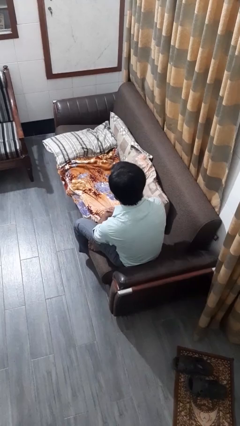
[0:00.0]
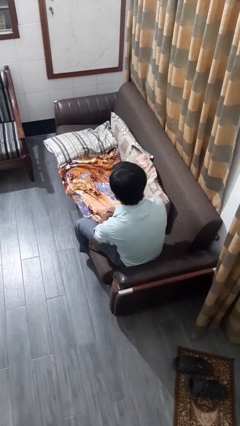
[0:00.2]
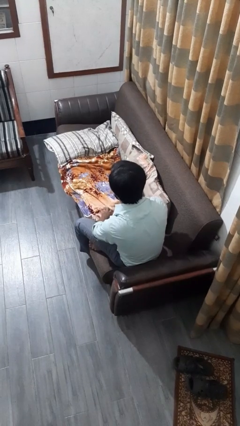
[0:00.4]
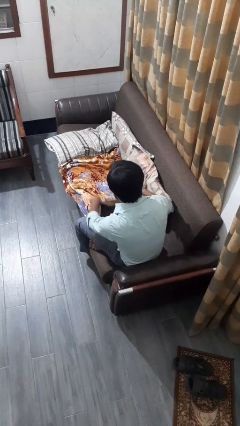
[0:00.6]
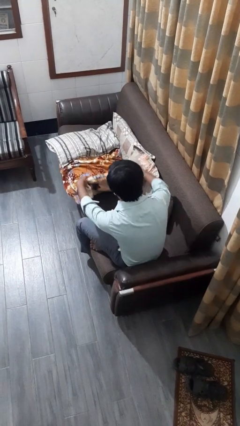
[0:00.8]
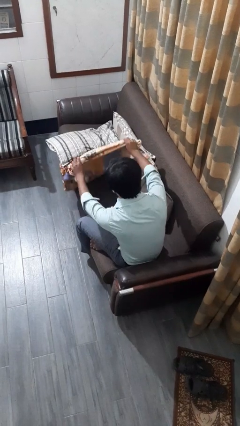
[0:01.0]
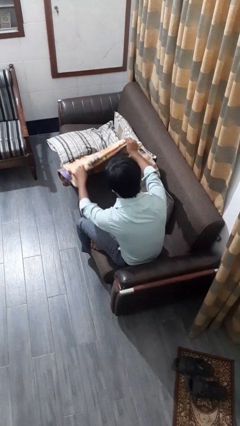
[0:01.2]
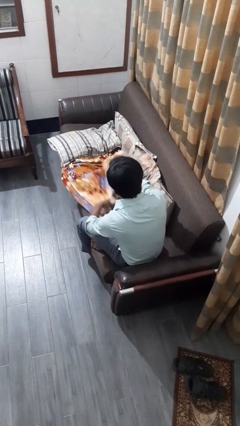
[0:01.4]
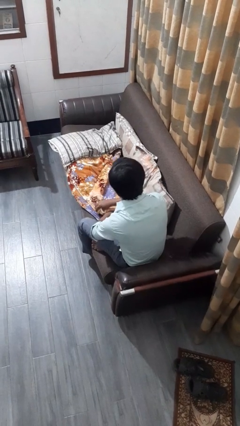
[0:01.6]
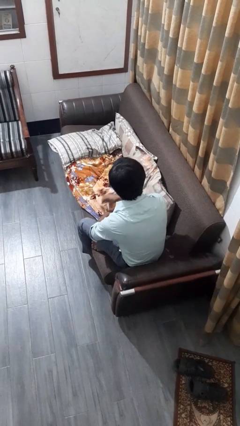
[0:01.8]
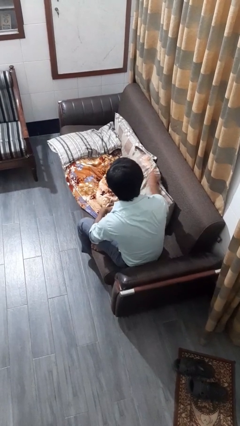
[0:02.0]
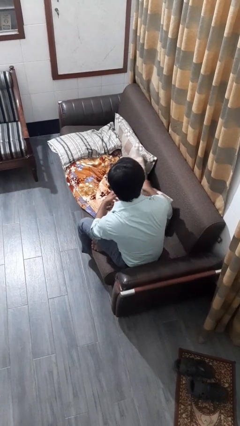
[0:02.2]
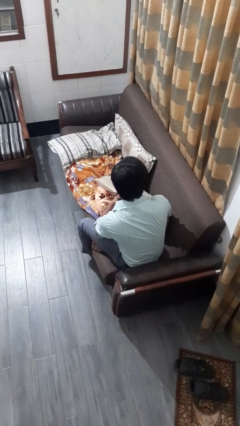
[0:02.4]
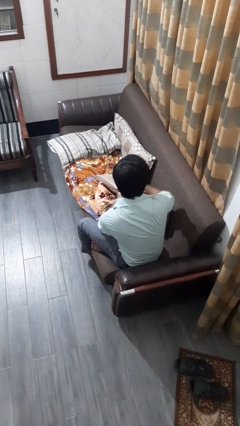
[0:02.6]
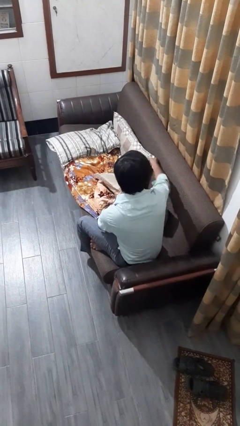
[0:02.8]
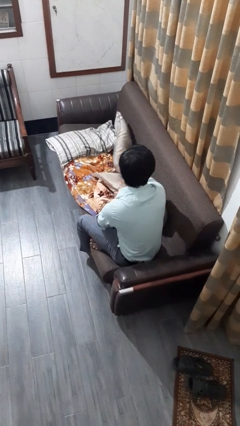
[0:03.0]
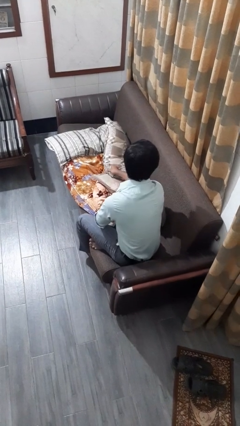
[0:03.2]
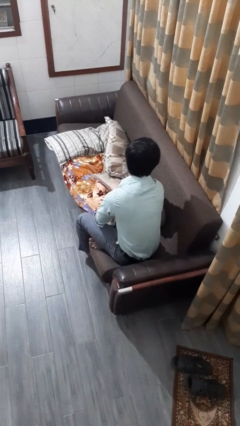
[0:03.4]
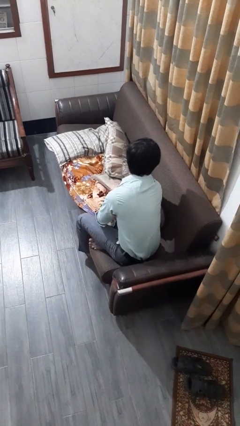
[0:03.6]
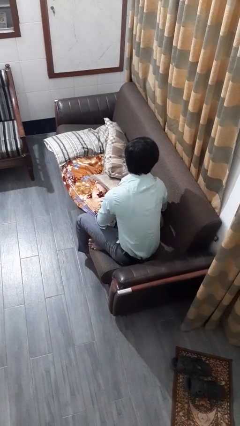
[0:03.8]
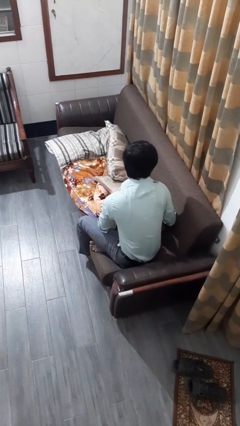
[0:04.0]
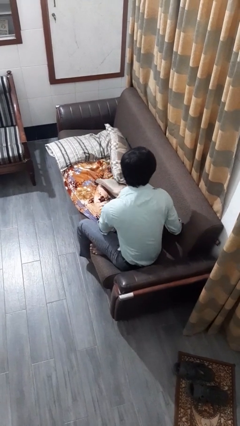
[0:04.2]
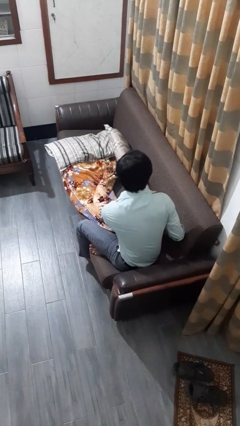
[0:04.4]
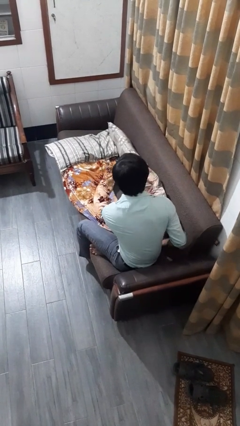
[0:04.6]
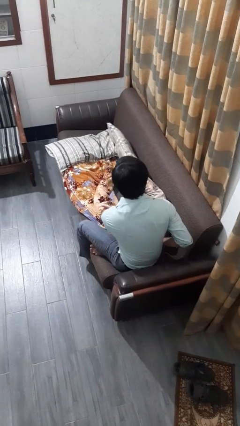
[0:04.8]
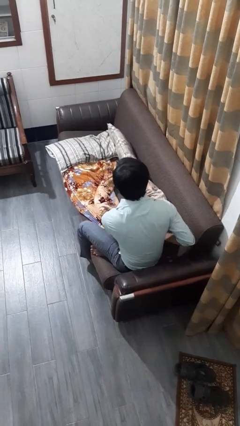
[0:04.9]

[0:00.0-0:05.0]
person searches in couch

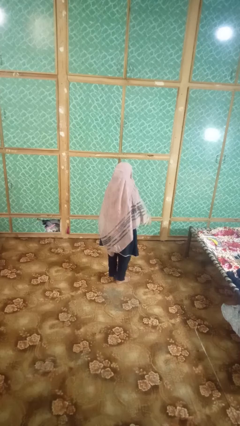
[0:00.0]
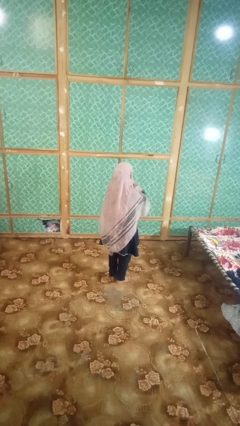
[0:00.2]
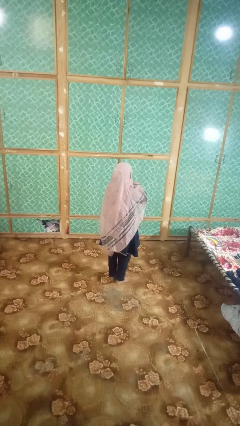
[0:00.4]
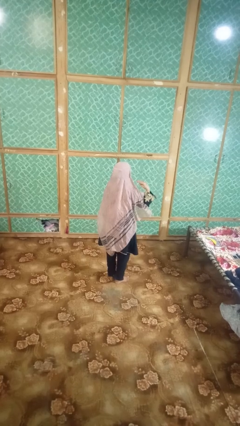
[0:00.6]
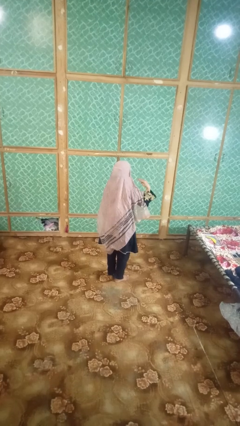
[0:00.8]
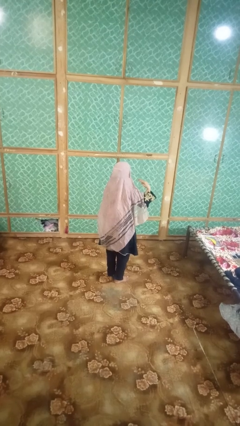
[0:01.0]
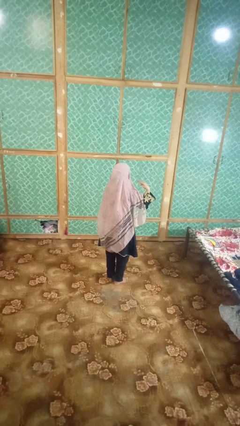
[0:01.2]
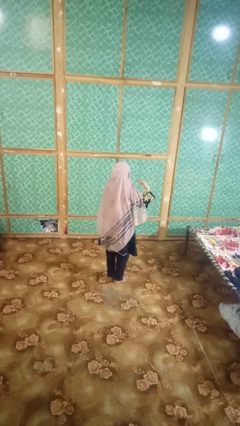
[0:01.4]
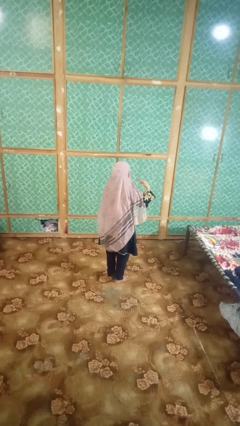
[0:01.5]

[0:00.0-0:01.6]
person gestures cut

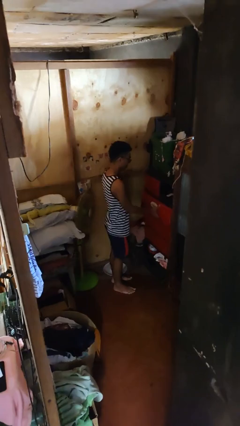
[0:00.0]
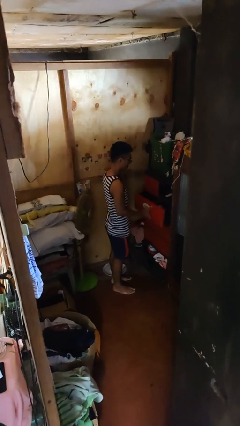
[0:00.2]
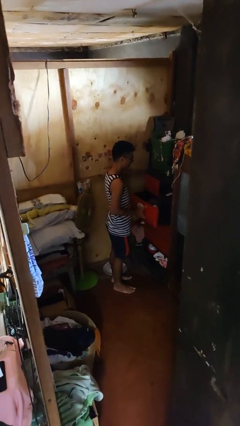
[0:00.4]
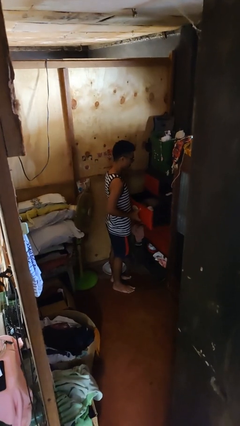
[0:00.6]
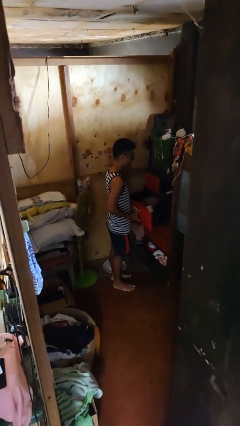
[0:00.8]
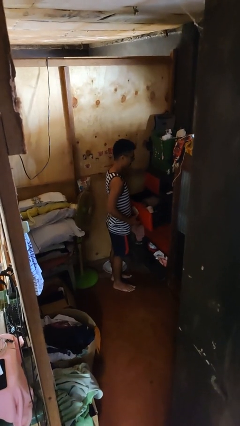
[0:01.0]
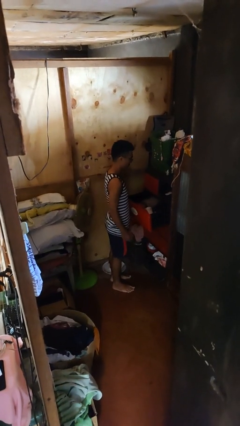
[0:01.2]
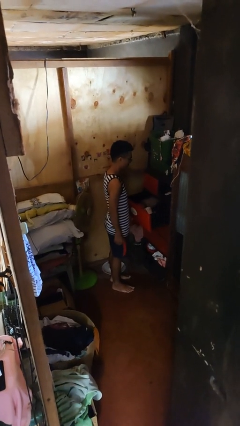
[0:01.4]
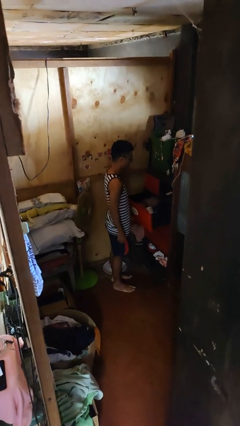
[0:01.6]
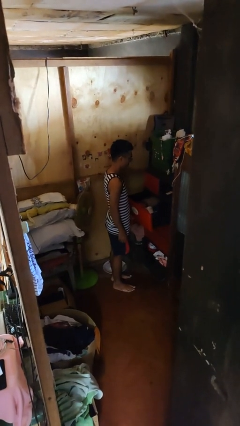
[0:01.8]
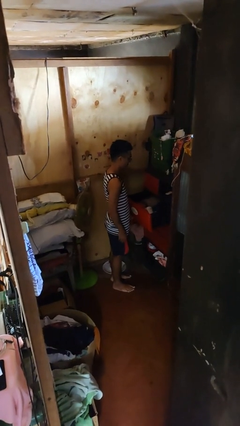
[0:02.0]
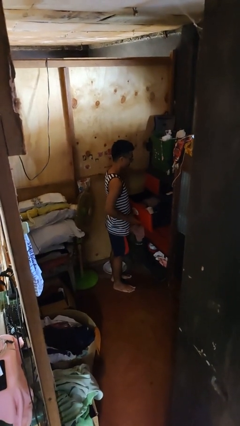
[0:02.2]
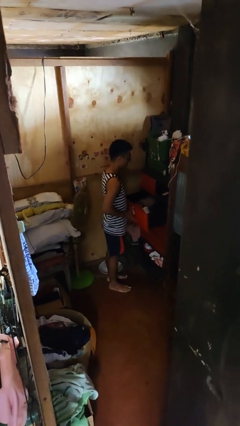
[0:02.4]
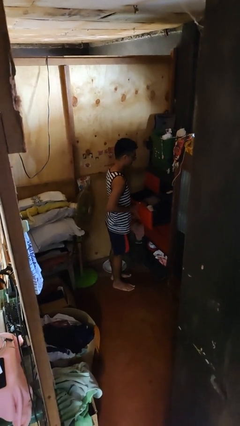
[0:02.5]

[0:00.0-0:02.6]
person opens dresser drawer

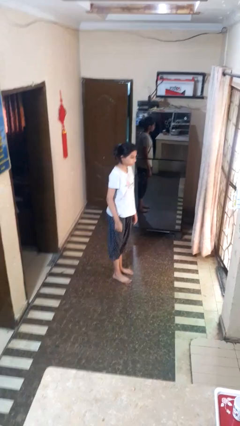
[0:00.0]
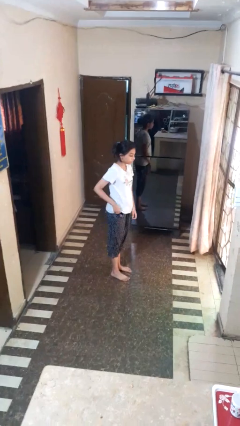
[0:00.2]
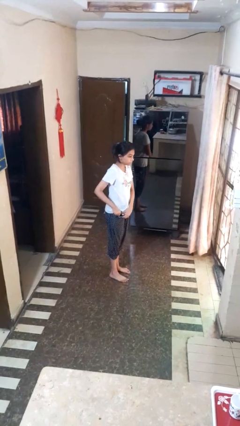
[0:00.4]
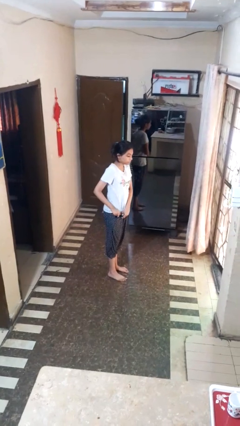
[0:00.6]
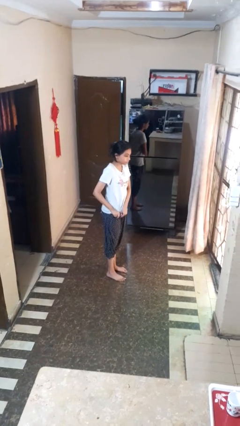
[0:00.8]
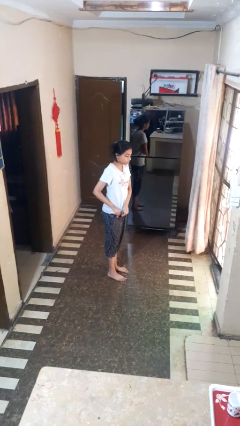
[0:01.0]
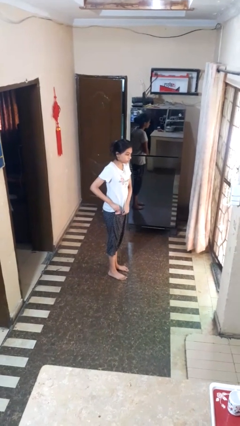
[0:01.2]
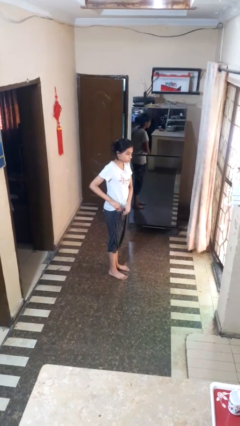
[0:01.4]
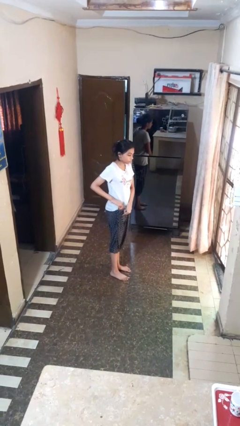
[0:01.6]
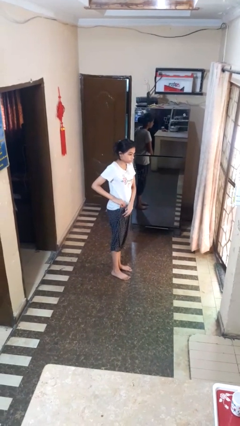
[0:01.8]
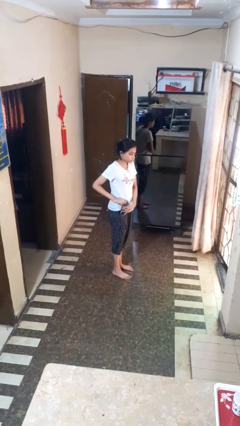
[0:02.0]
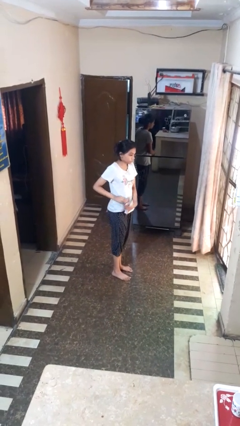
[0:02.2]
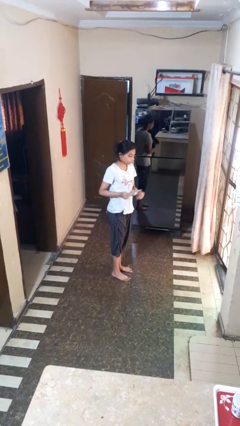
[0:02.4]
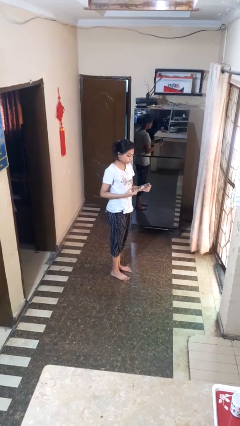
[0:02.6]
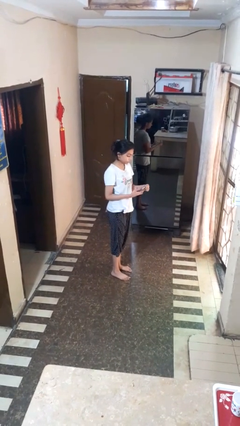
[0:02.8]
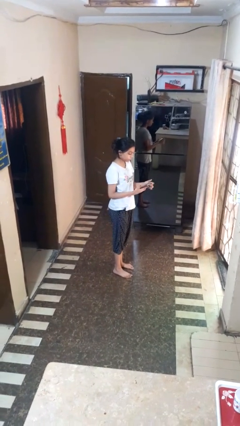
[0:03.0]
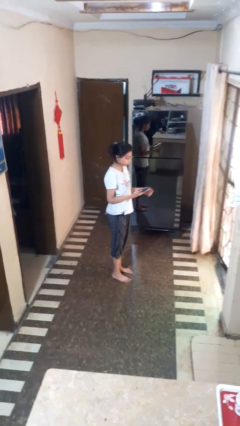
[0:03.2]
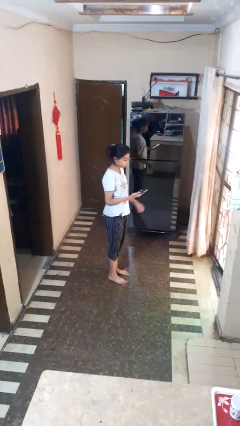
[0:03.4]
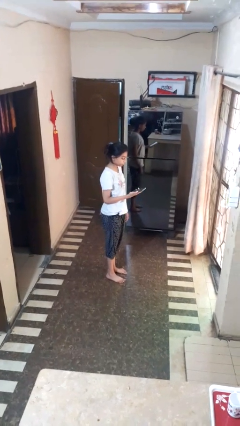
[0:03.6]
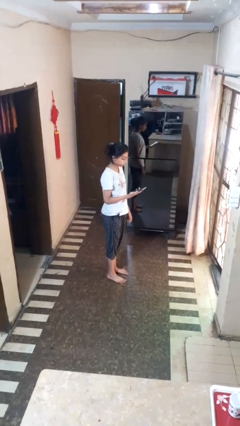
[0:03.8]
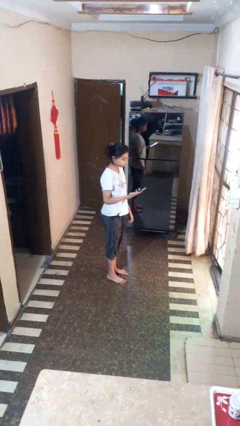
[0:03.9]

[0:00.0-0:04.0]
person takes phone from pocket

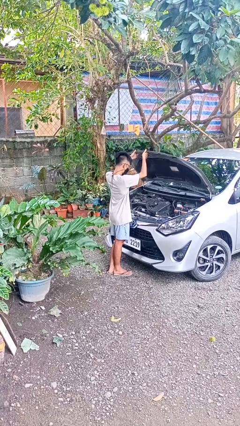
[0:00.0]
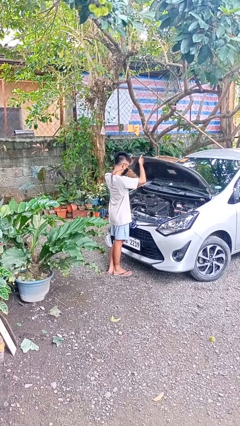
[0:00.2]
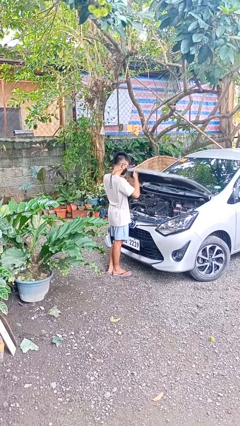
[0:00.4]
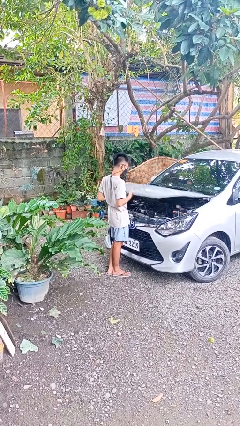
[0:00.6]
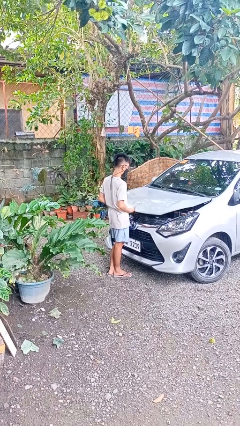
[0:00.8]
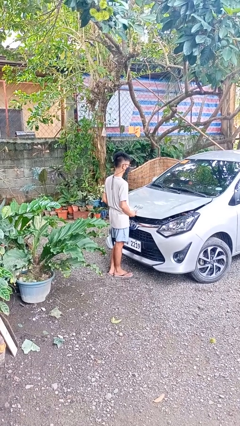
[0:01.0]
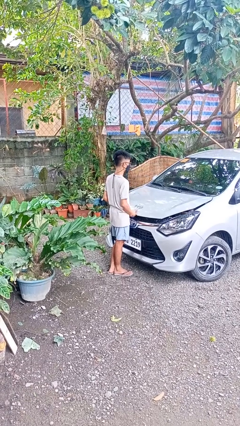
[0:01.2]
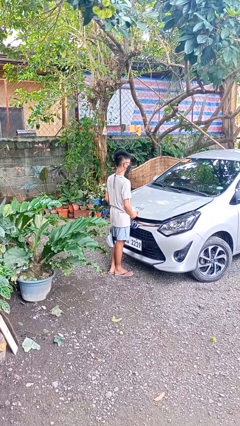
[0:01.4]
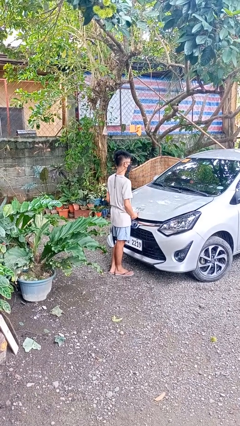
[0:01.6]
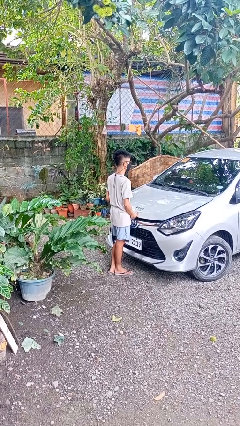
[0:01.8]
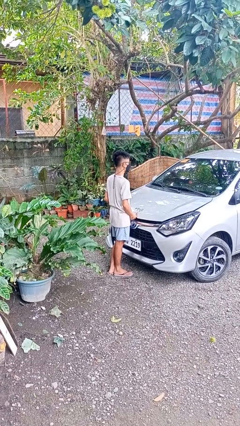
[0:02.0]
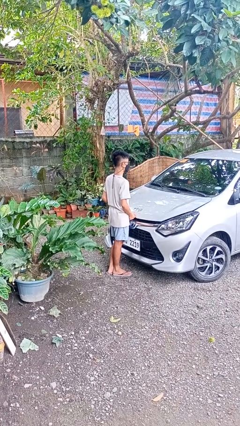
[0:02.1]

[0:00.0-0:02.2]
person closes car hood

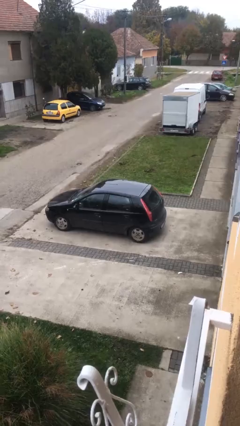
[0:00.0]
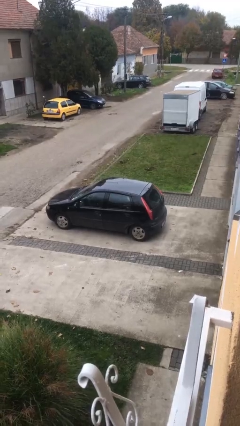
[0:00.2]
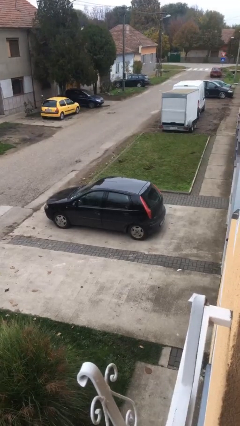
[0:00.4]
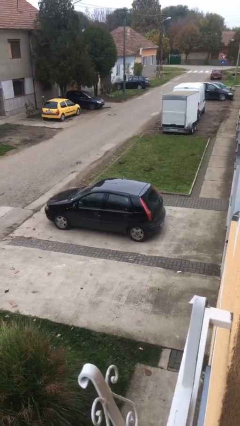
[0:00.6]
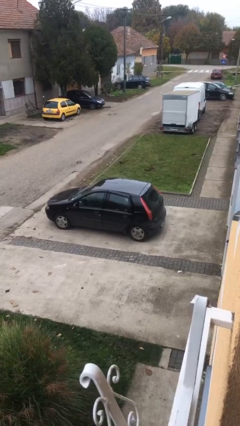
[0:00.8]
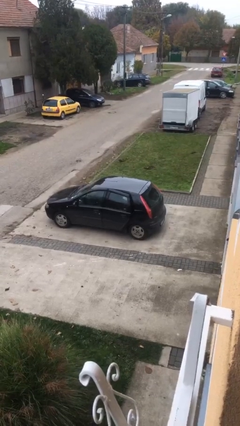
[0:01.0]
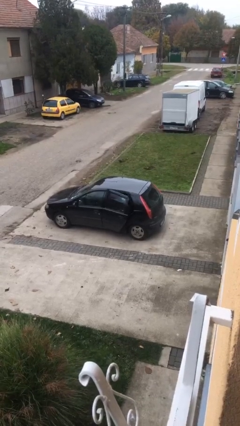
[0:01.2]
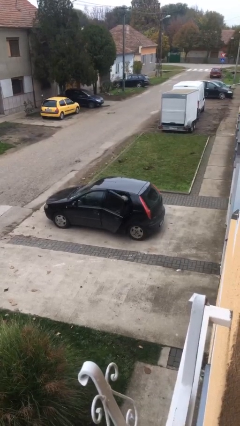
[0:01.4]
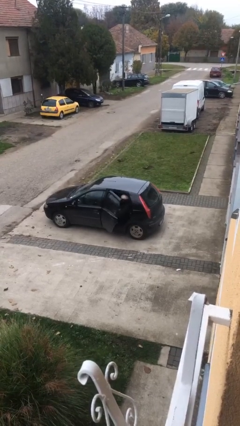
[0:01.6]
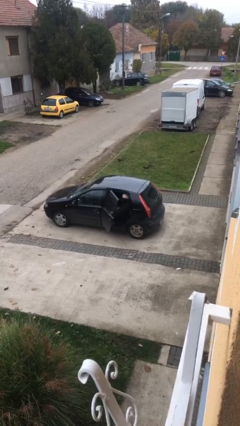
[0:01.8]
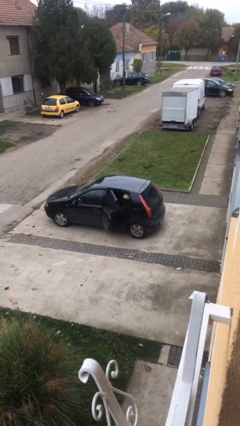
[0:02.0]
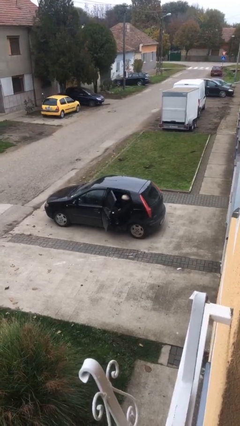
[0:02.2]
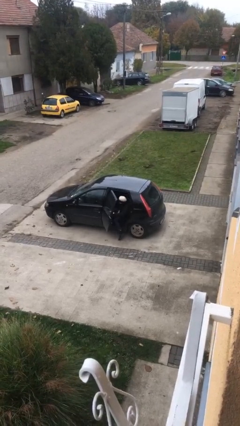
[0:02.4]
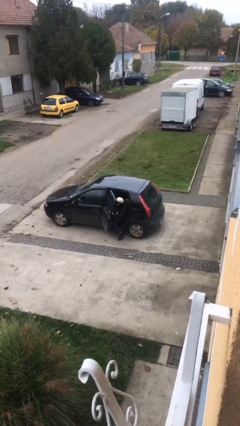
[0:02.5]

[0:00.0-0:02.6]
person opens car door
